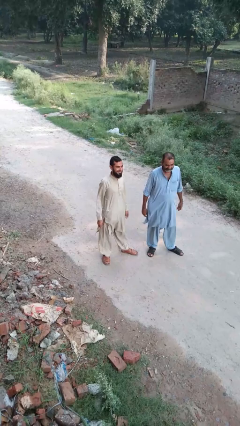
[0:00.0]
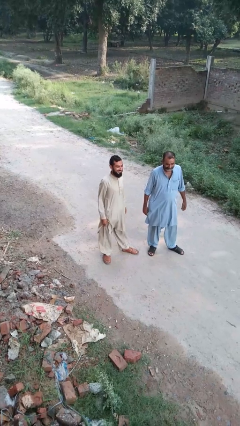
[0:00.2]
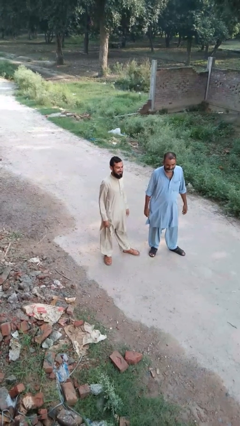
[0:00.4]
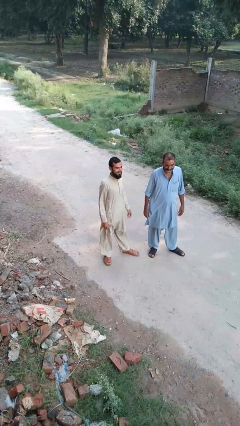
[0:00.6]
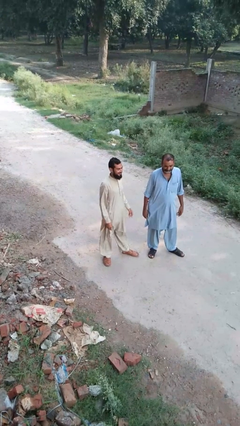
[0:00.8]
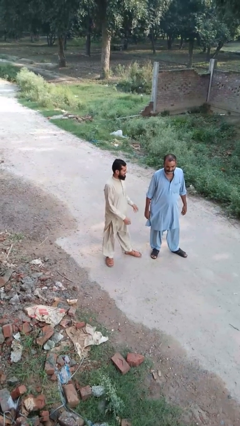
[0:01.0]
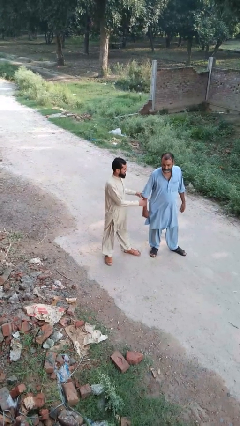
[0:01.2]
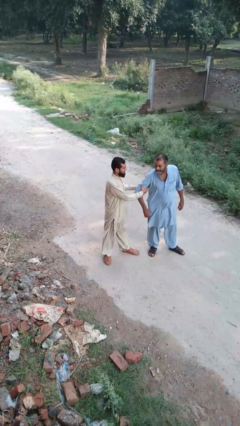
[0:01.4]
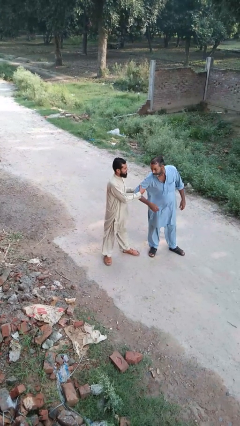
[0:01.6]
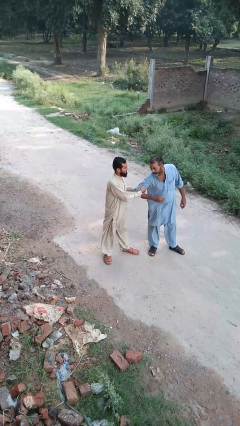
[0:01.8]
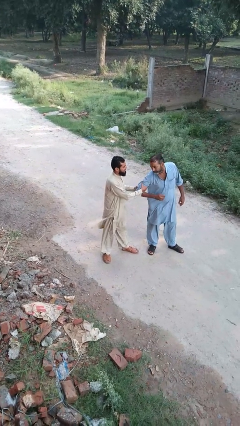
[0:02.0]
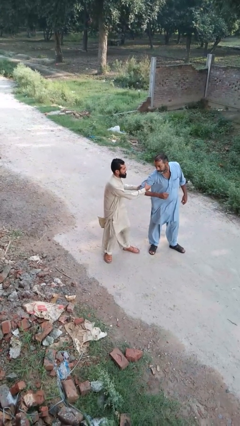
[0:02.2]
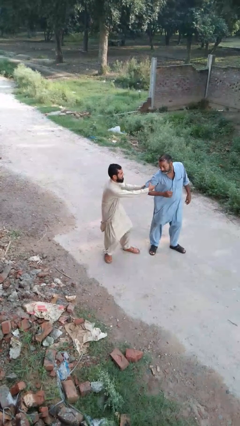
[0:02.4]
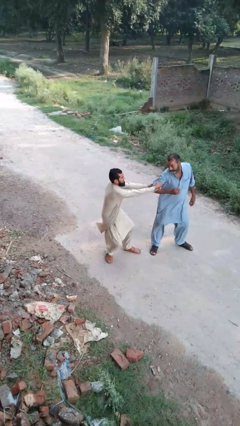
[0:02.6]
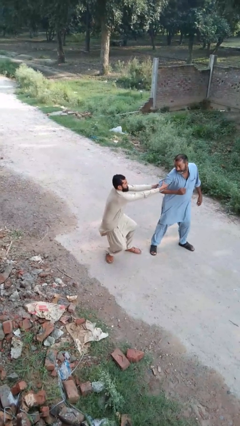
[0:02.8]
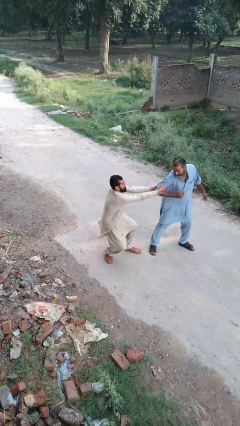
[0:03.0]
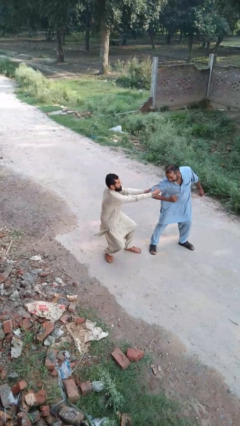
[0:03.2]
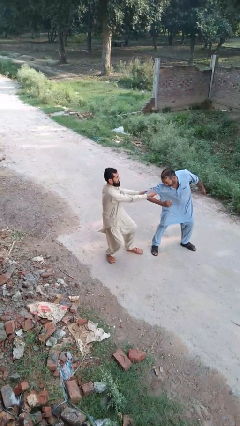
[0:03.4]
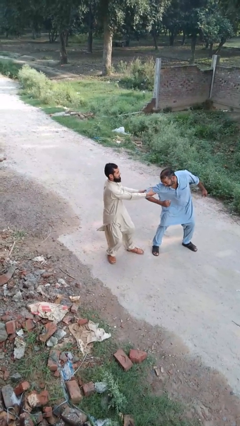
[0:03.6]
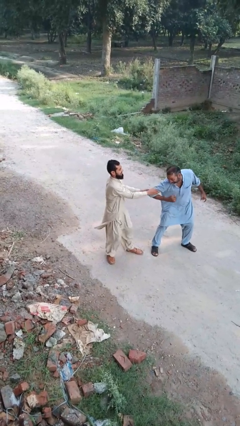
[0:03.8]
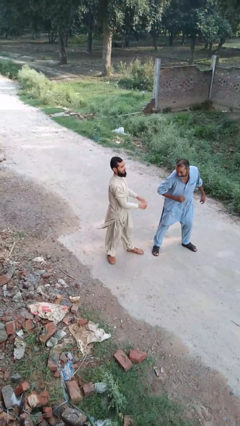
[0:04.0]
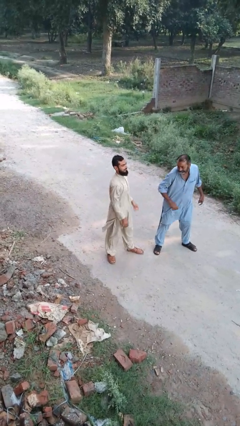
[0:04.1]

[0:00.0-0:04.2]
person grabs person by forearm

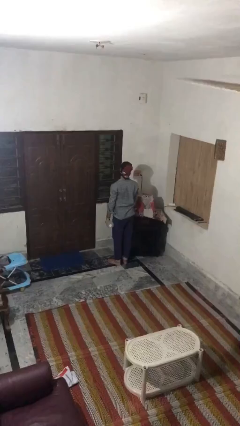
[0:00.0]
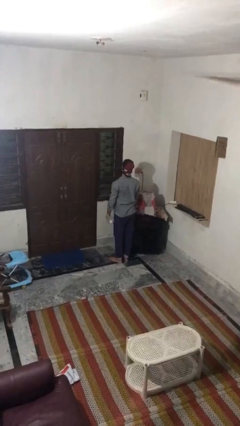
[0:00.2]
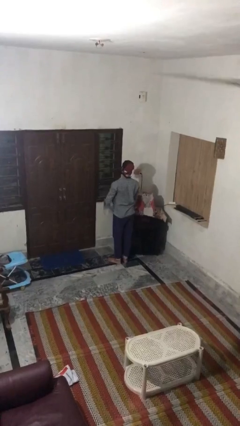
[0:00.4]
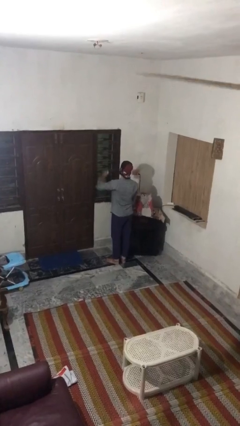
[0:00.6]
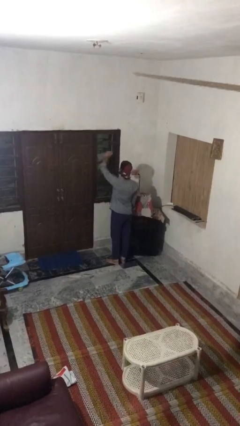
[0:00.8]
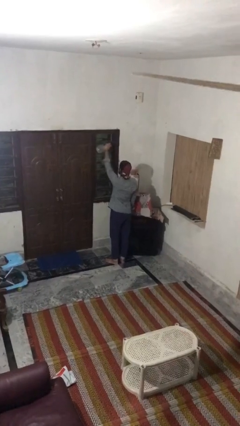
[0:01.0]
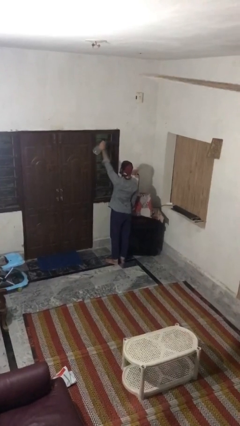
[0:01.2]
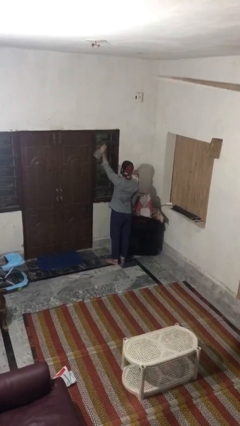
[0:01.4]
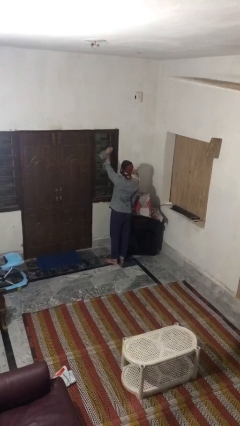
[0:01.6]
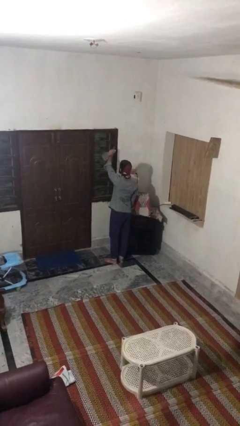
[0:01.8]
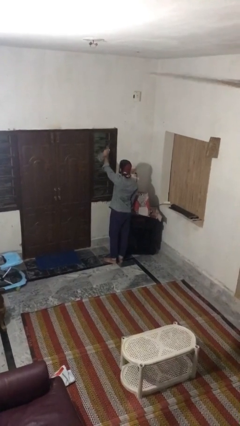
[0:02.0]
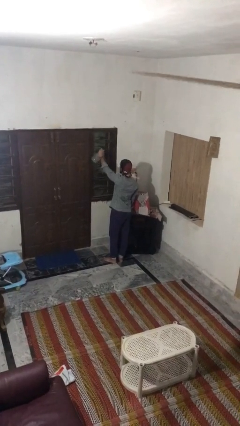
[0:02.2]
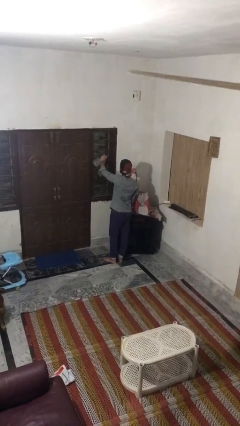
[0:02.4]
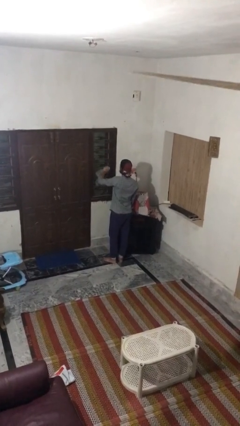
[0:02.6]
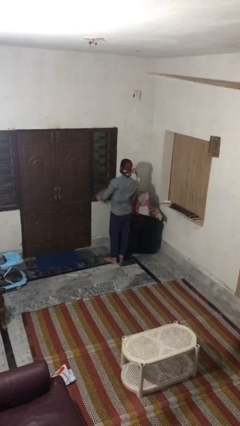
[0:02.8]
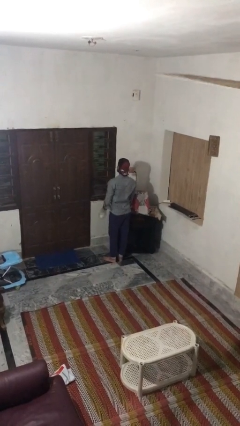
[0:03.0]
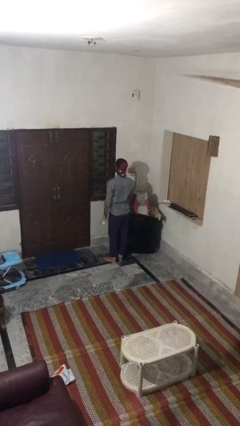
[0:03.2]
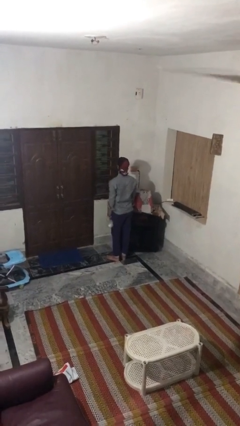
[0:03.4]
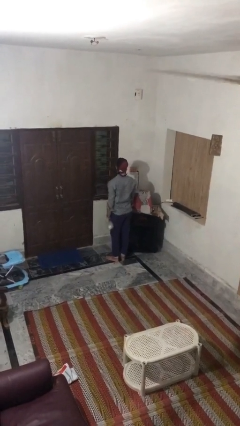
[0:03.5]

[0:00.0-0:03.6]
person sprays from bottle

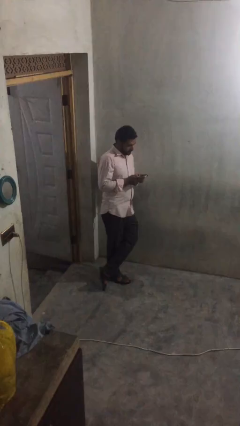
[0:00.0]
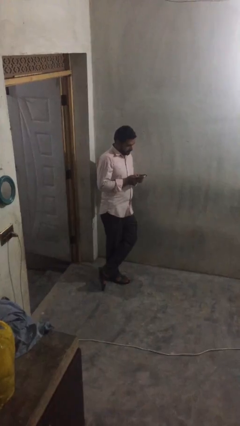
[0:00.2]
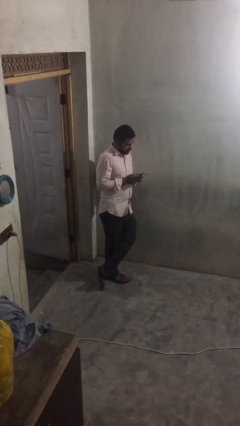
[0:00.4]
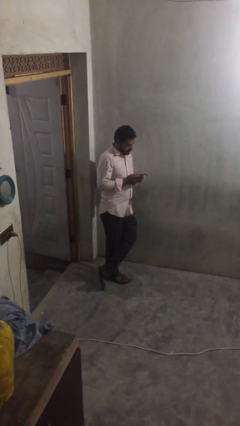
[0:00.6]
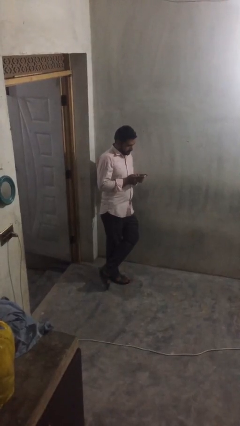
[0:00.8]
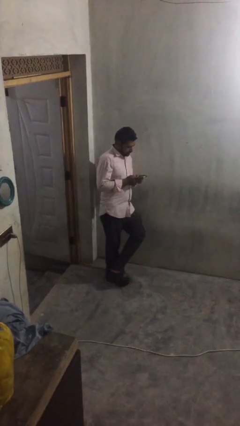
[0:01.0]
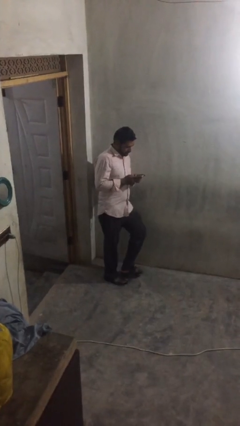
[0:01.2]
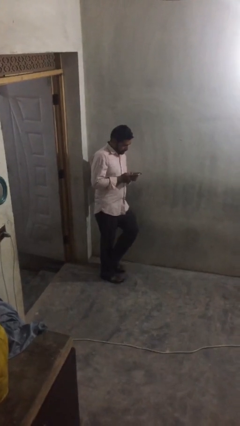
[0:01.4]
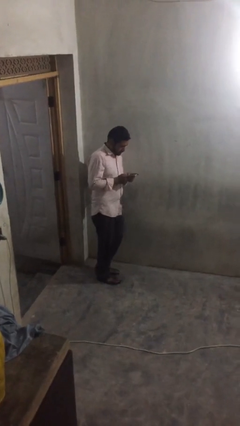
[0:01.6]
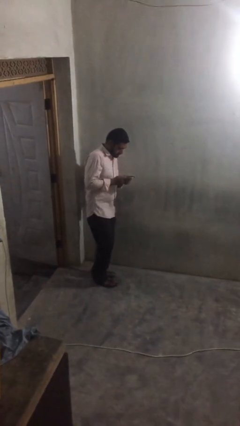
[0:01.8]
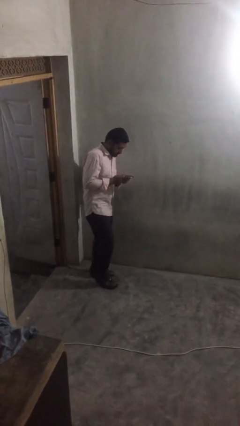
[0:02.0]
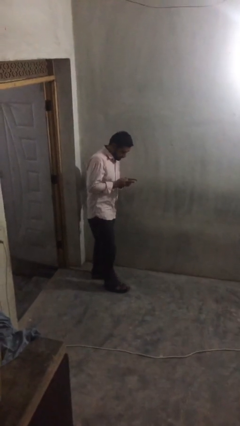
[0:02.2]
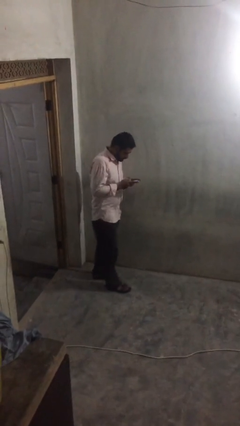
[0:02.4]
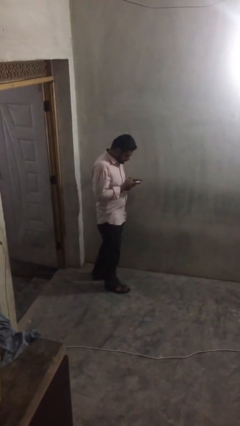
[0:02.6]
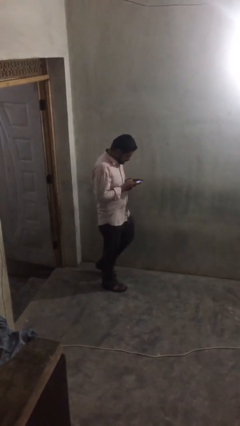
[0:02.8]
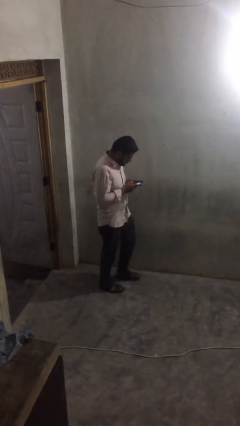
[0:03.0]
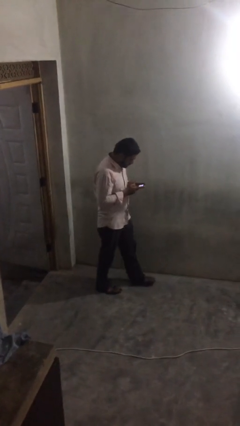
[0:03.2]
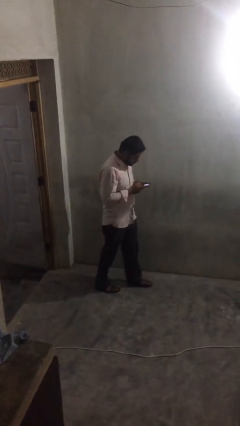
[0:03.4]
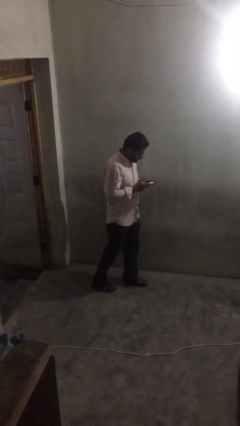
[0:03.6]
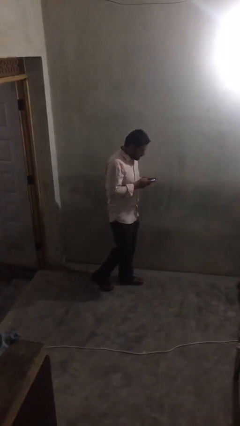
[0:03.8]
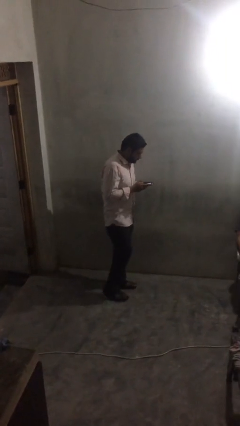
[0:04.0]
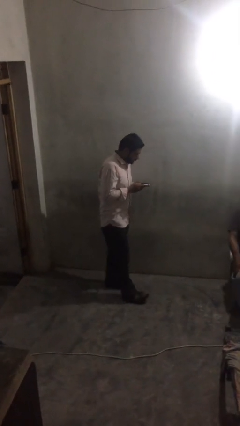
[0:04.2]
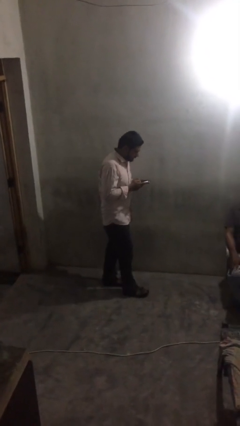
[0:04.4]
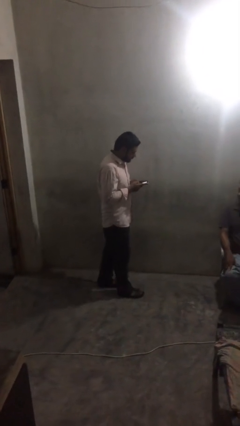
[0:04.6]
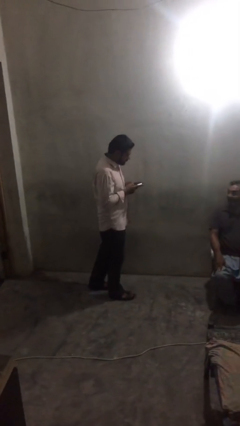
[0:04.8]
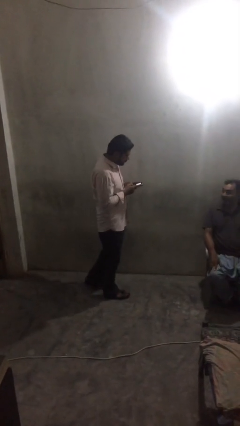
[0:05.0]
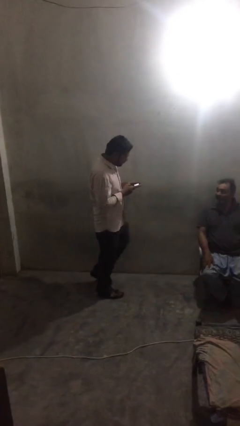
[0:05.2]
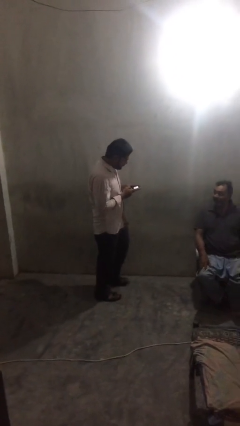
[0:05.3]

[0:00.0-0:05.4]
person texts on phone

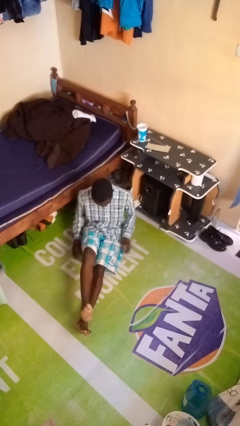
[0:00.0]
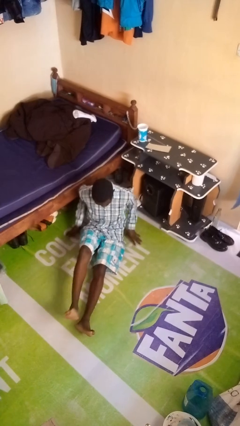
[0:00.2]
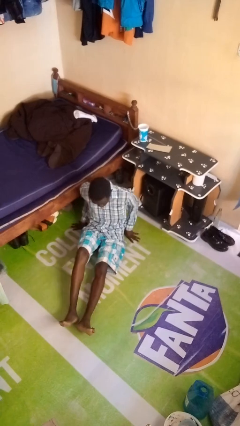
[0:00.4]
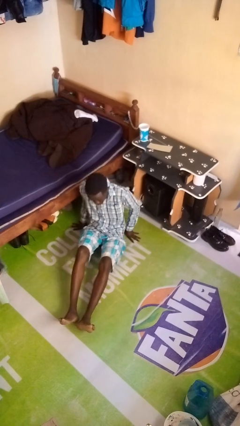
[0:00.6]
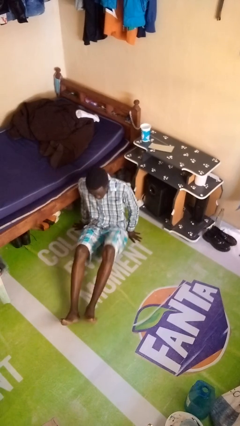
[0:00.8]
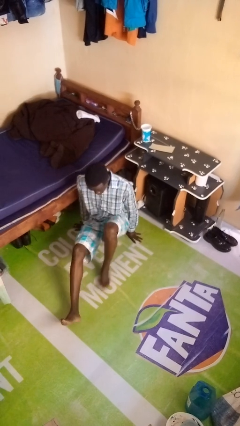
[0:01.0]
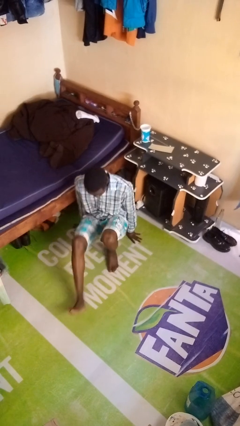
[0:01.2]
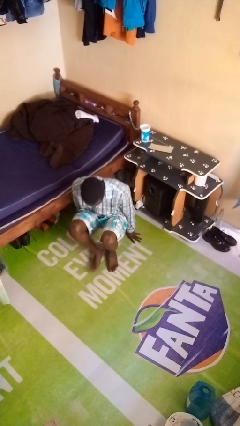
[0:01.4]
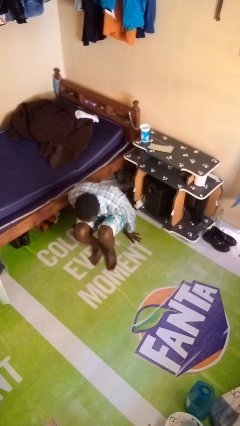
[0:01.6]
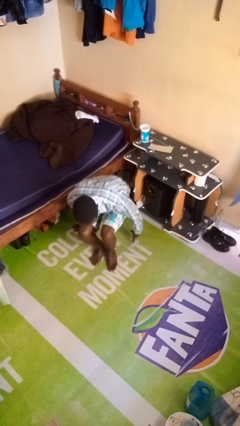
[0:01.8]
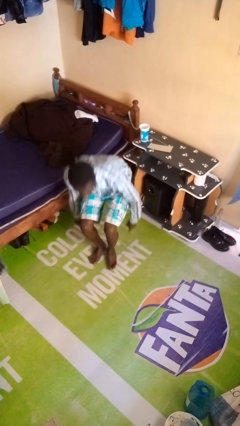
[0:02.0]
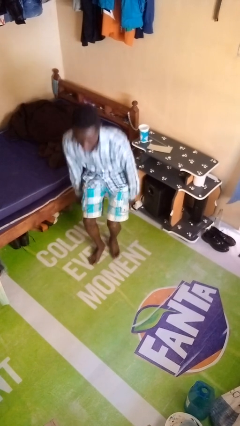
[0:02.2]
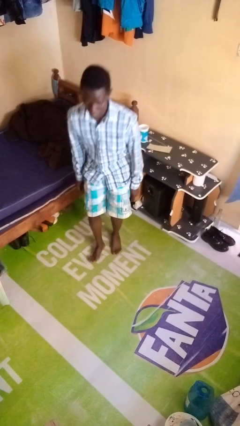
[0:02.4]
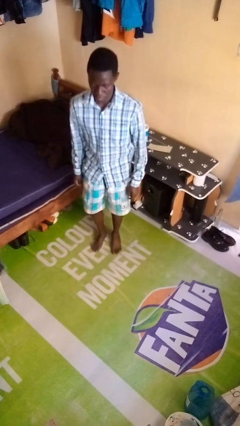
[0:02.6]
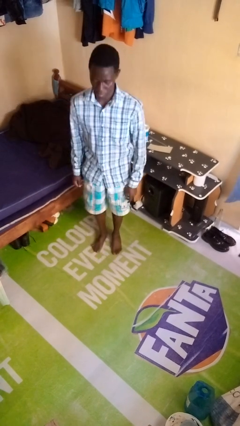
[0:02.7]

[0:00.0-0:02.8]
person stands up from floor

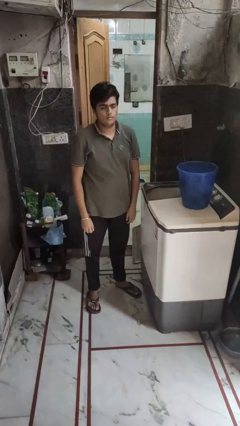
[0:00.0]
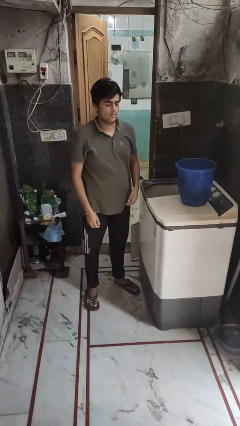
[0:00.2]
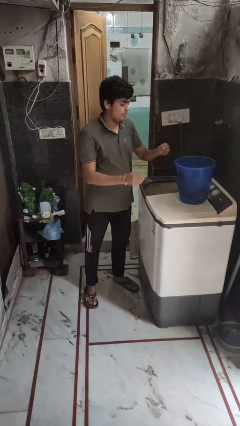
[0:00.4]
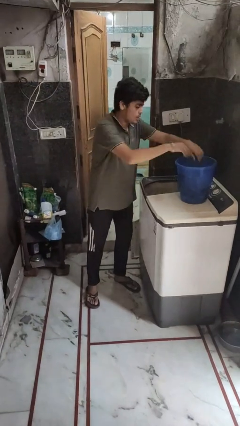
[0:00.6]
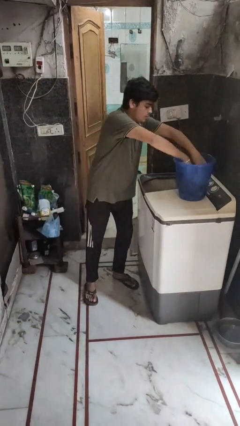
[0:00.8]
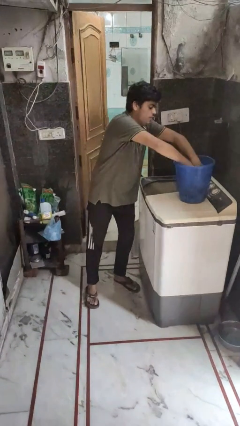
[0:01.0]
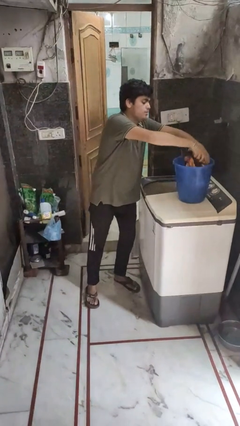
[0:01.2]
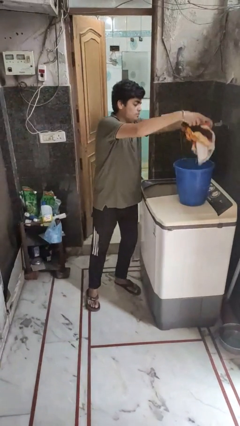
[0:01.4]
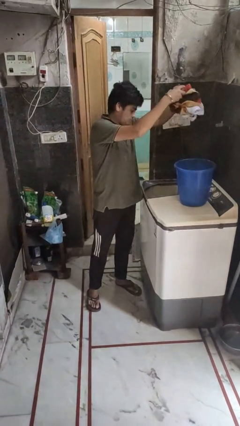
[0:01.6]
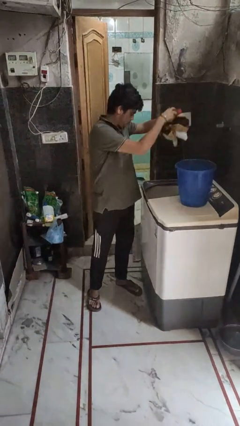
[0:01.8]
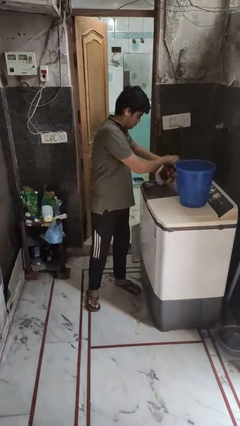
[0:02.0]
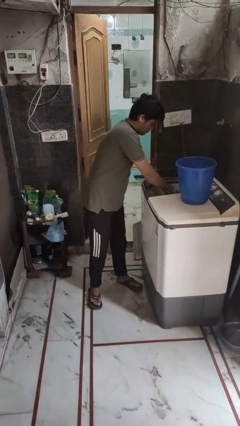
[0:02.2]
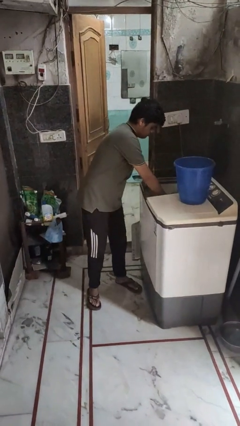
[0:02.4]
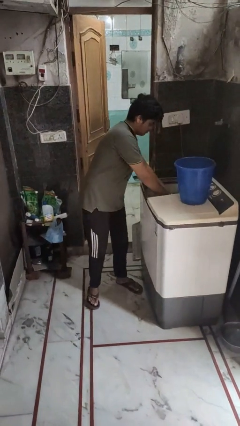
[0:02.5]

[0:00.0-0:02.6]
person loads clotheswasher
